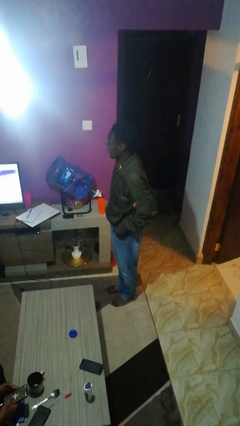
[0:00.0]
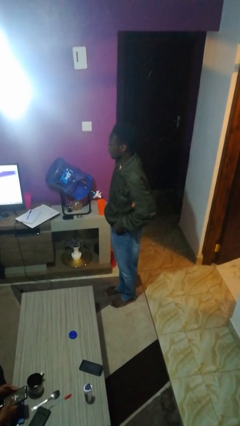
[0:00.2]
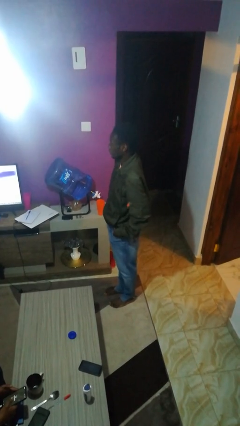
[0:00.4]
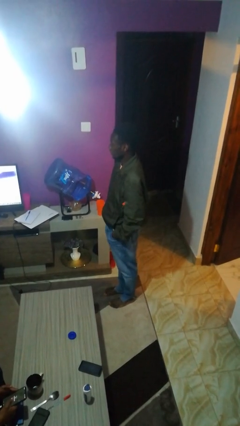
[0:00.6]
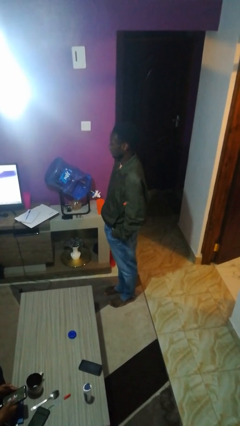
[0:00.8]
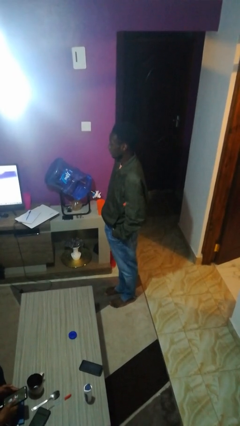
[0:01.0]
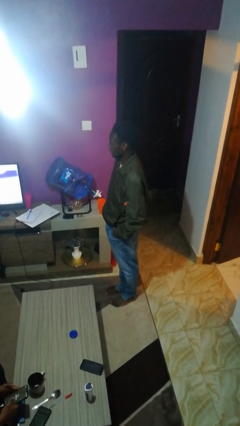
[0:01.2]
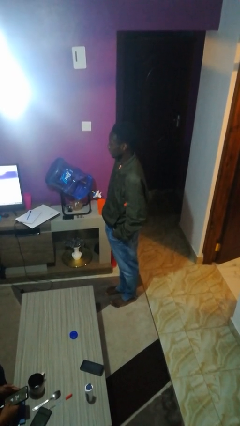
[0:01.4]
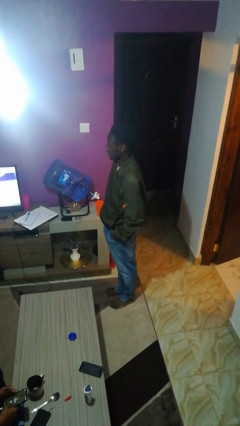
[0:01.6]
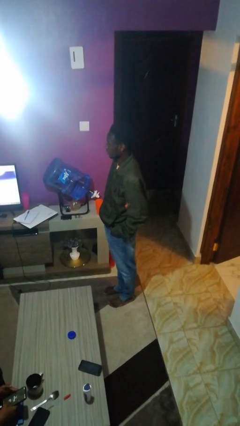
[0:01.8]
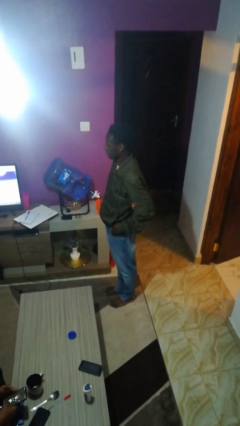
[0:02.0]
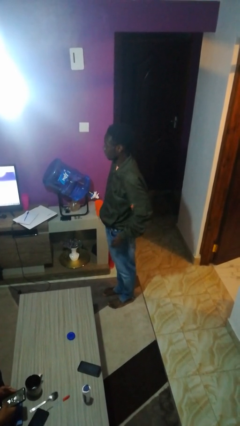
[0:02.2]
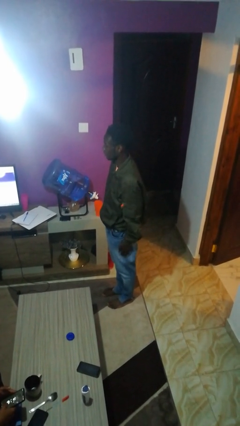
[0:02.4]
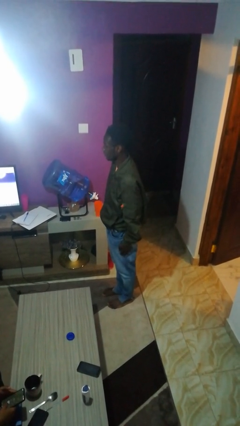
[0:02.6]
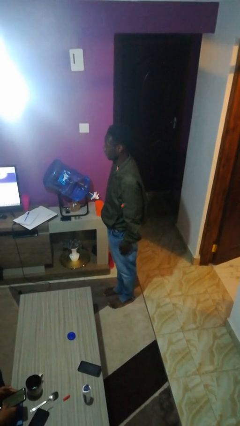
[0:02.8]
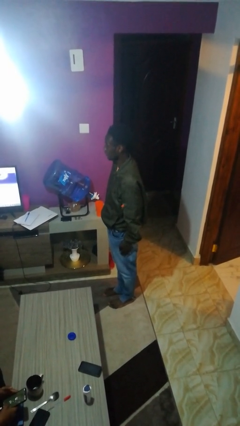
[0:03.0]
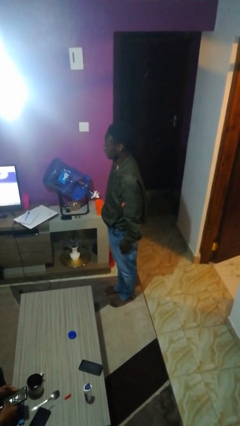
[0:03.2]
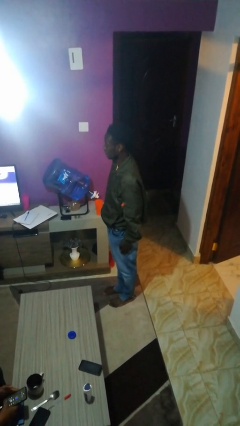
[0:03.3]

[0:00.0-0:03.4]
person puts hands in back pockets

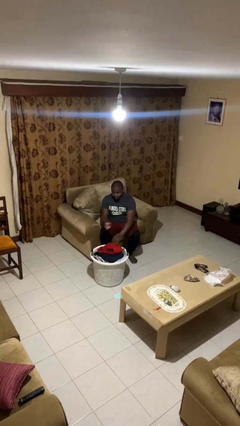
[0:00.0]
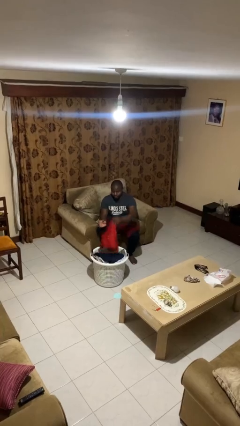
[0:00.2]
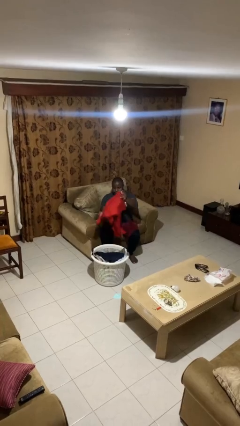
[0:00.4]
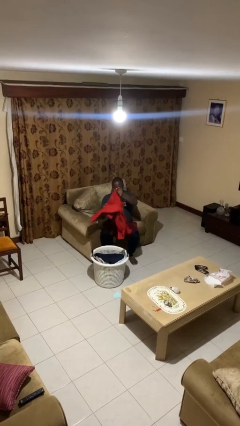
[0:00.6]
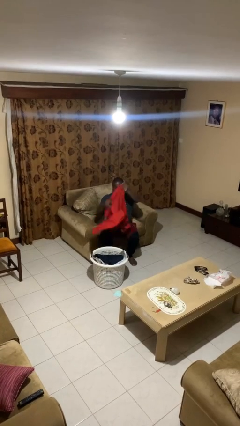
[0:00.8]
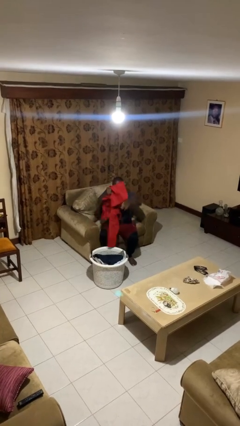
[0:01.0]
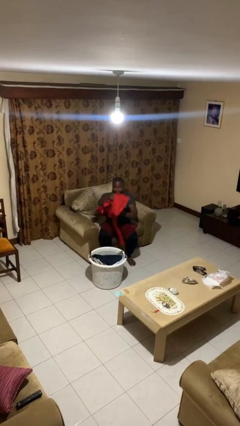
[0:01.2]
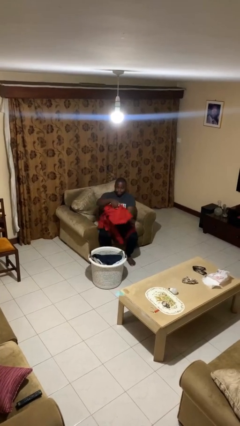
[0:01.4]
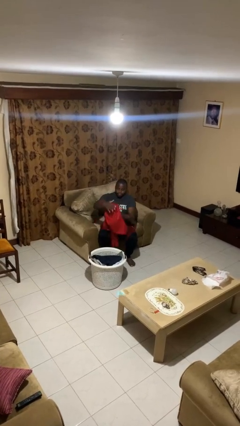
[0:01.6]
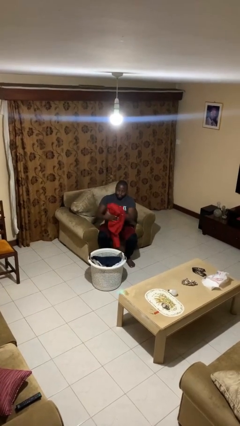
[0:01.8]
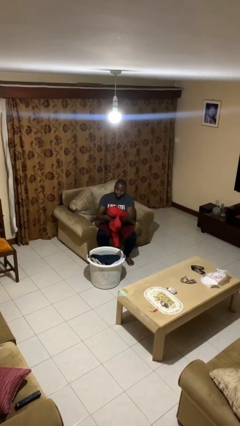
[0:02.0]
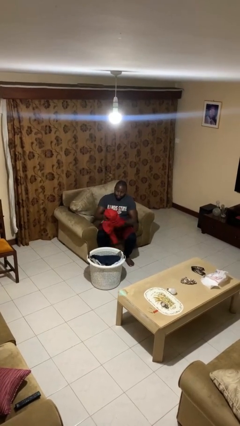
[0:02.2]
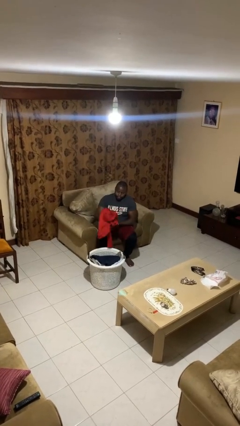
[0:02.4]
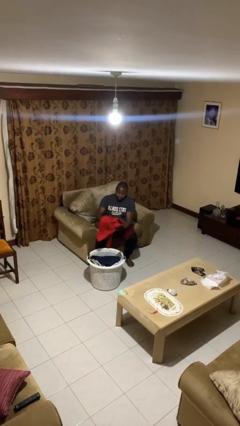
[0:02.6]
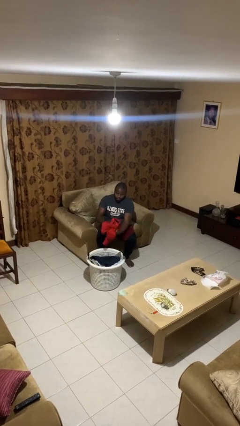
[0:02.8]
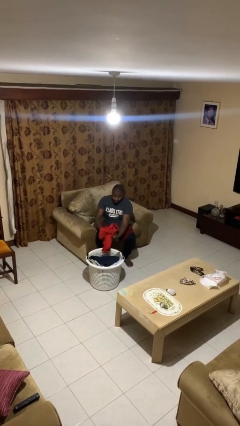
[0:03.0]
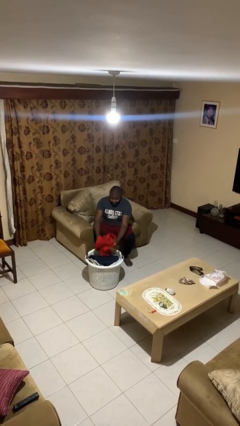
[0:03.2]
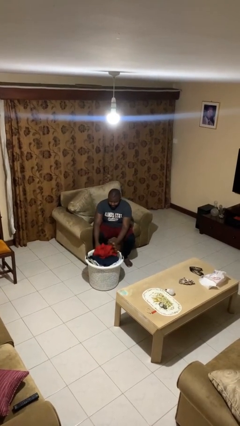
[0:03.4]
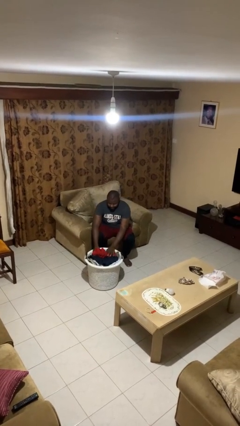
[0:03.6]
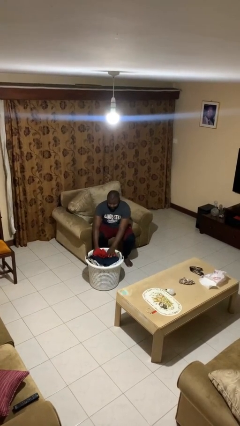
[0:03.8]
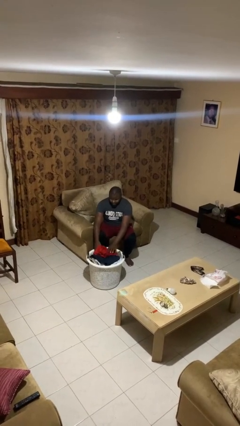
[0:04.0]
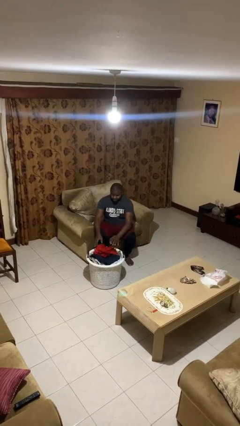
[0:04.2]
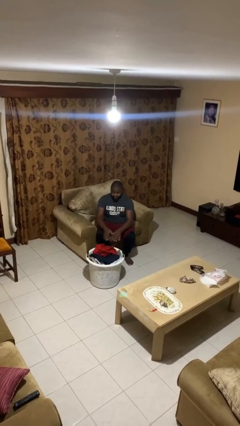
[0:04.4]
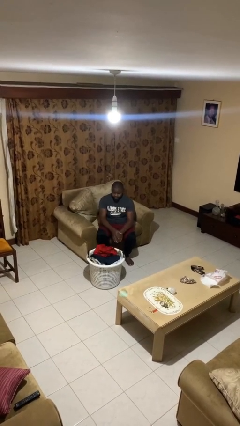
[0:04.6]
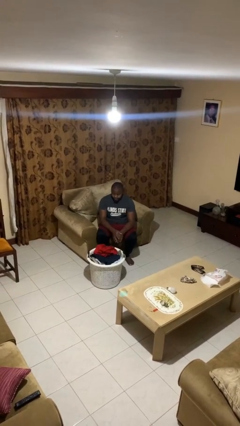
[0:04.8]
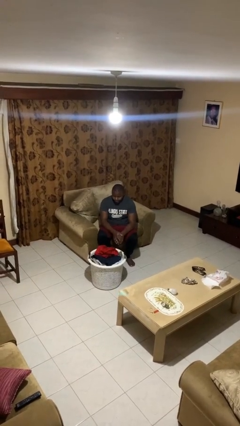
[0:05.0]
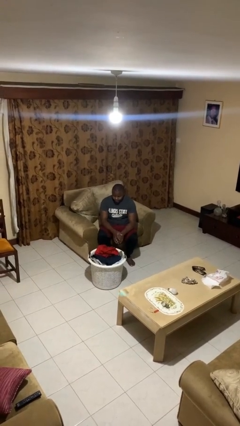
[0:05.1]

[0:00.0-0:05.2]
person folds shirt

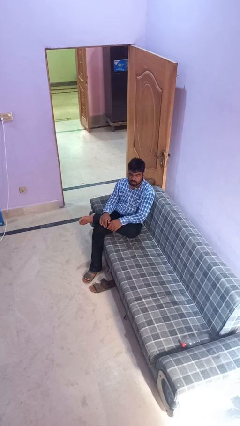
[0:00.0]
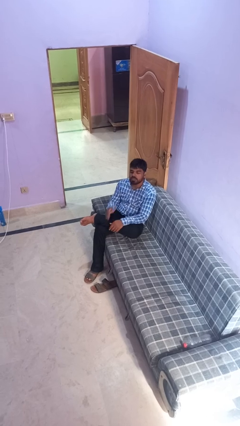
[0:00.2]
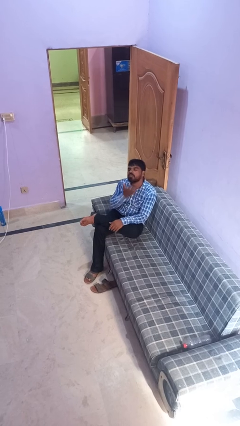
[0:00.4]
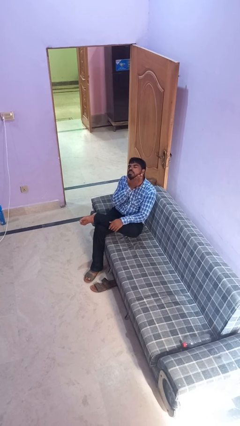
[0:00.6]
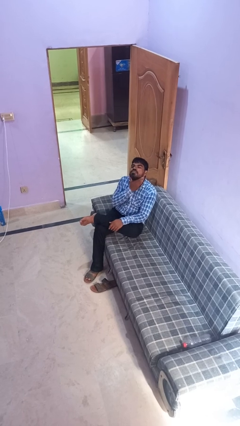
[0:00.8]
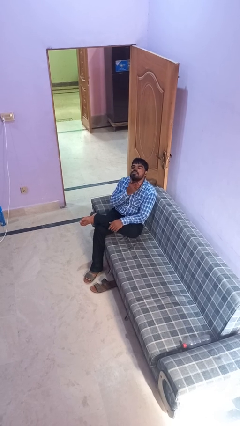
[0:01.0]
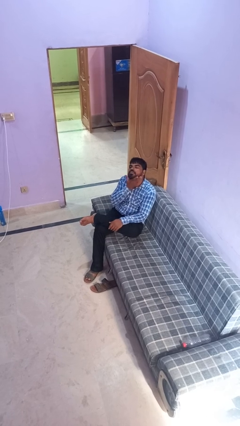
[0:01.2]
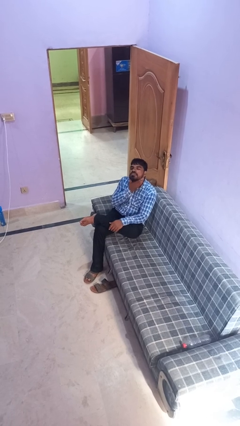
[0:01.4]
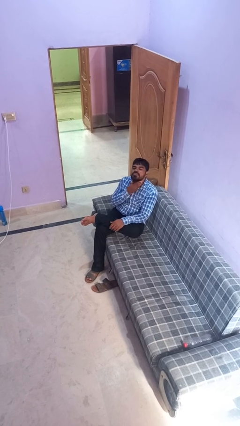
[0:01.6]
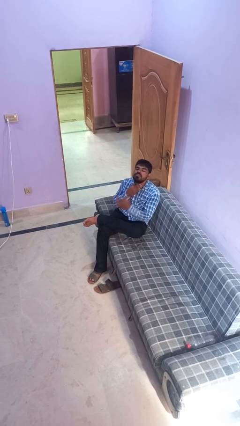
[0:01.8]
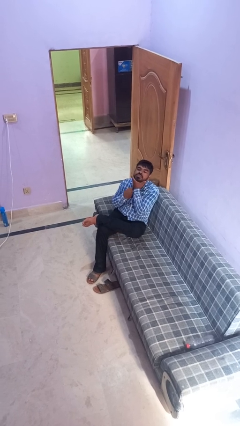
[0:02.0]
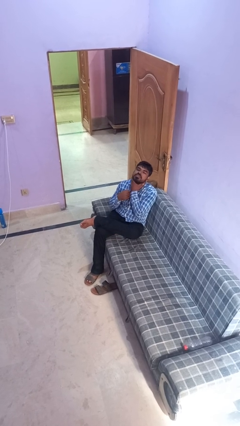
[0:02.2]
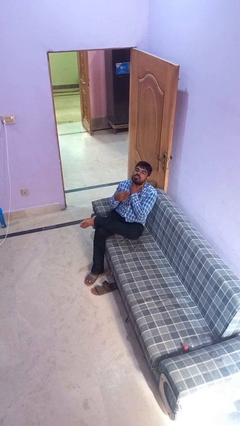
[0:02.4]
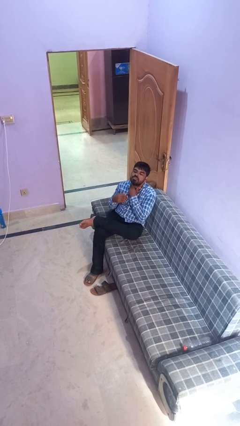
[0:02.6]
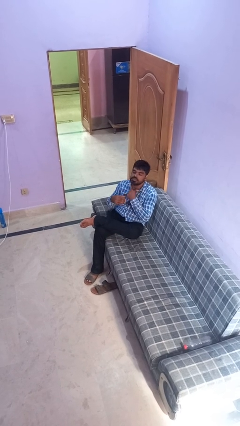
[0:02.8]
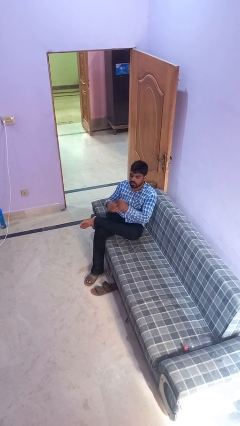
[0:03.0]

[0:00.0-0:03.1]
person rubs neck

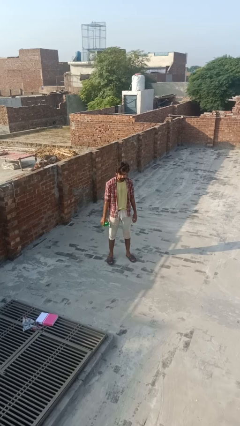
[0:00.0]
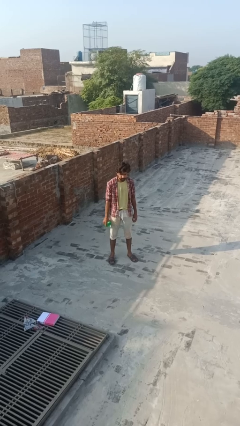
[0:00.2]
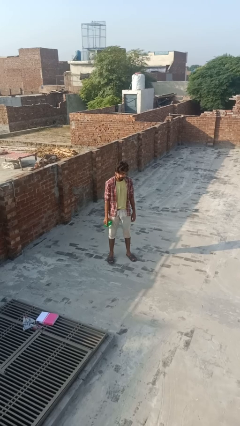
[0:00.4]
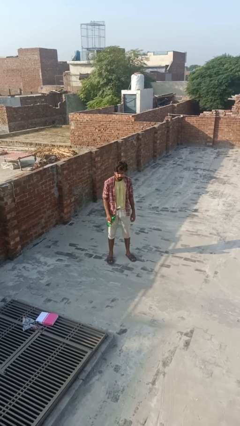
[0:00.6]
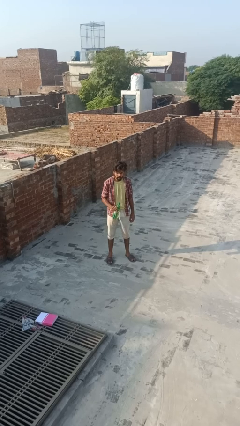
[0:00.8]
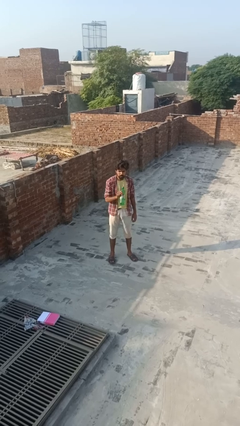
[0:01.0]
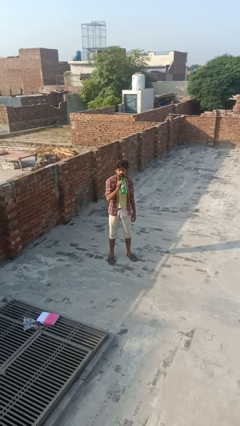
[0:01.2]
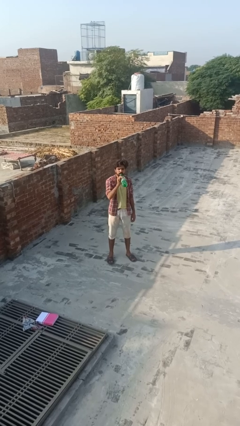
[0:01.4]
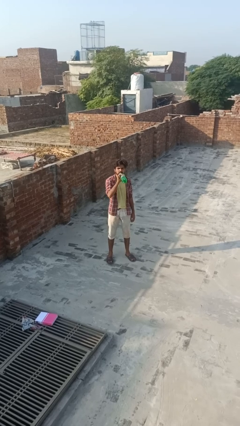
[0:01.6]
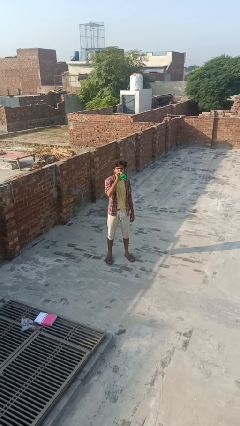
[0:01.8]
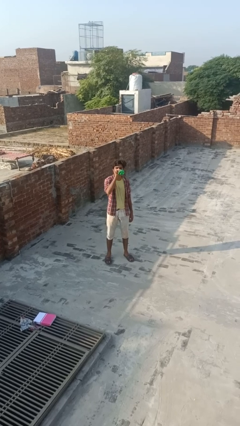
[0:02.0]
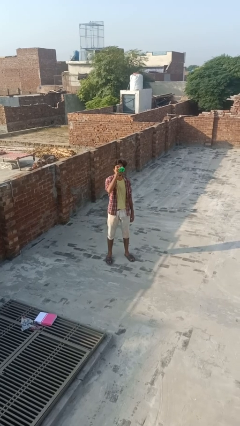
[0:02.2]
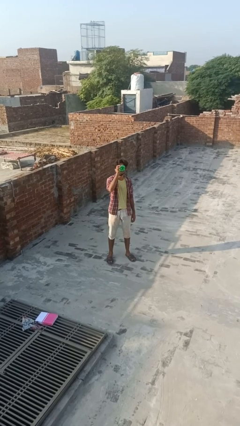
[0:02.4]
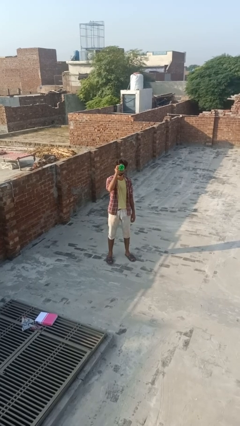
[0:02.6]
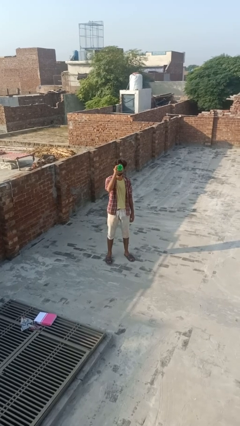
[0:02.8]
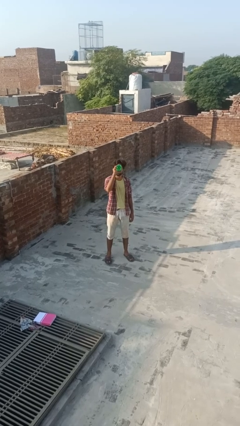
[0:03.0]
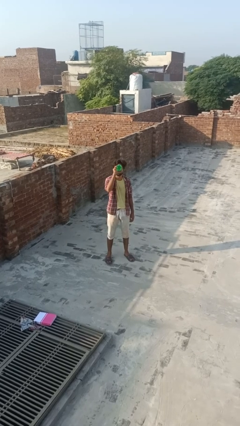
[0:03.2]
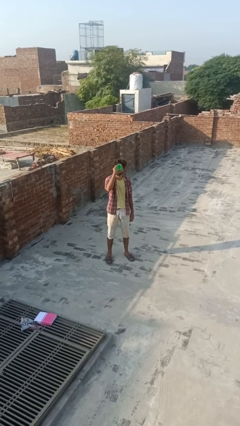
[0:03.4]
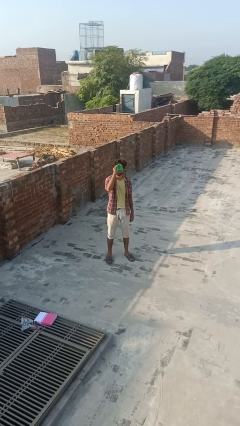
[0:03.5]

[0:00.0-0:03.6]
person drinks from bottle

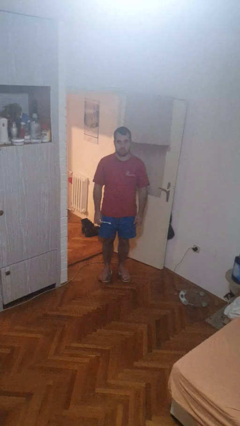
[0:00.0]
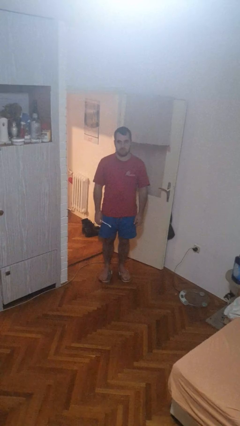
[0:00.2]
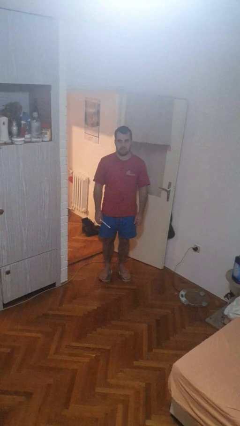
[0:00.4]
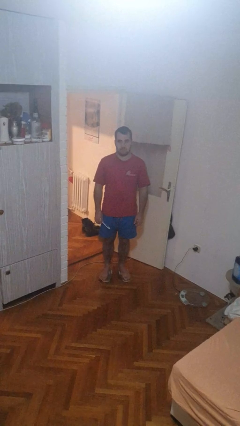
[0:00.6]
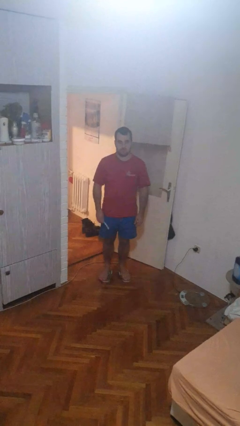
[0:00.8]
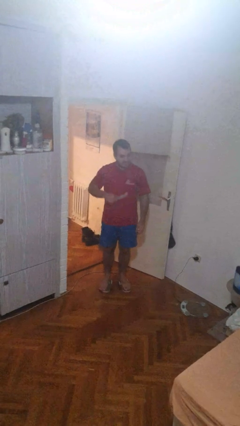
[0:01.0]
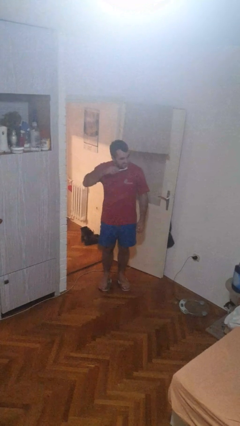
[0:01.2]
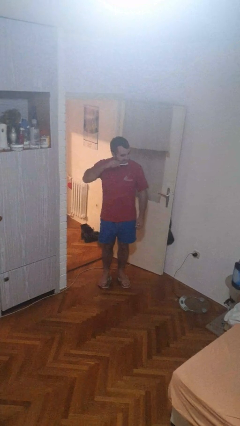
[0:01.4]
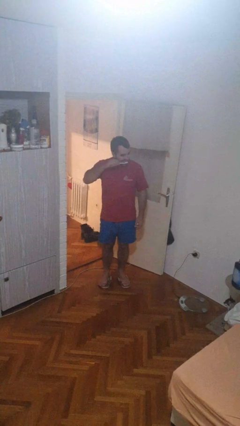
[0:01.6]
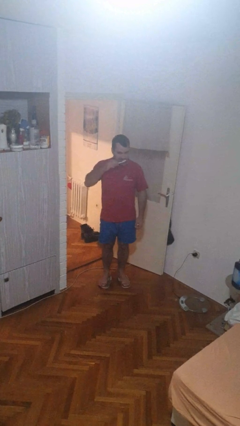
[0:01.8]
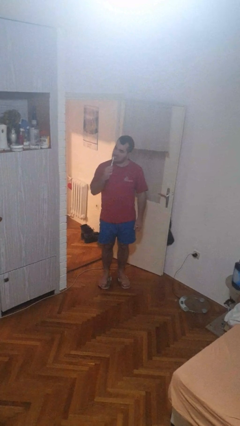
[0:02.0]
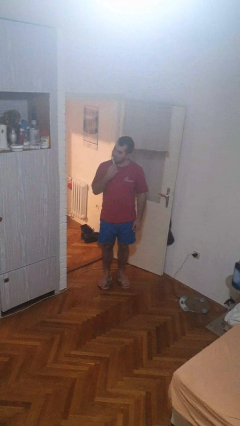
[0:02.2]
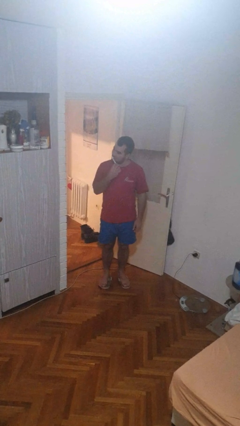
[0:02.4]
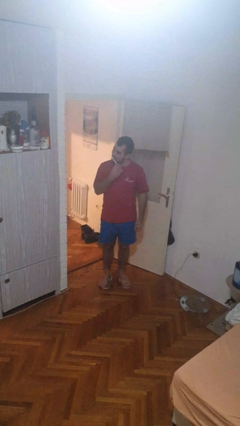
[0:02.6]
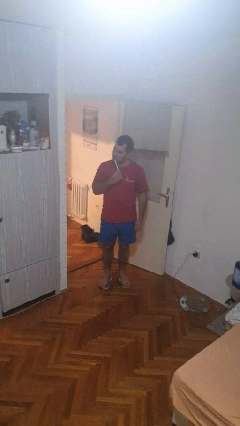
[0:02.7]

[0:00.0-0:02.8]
person brushes teeth
